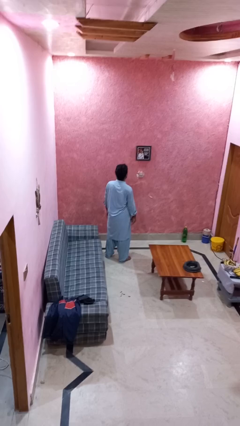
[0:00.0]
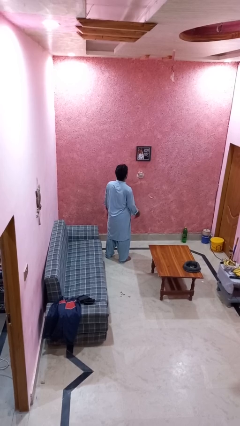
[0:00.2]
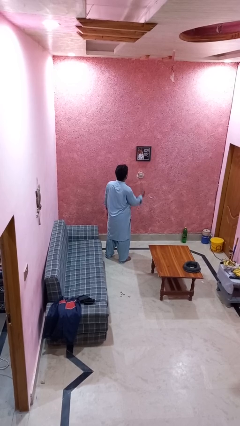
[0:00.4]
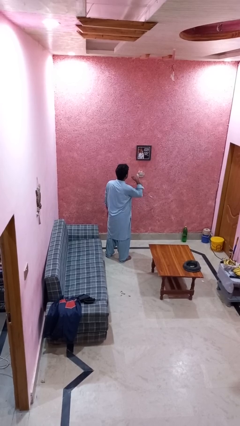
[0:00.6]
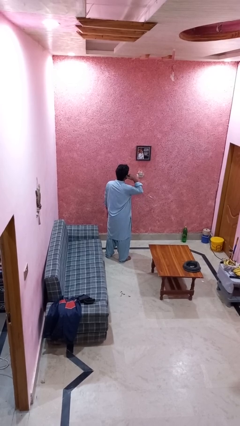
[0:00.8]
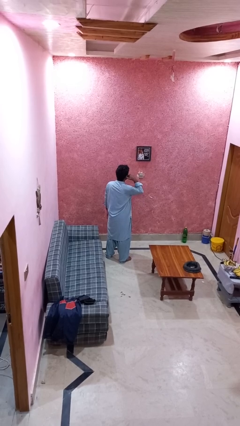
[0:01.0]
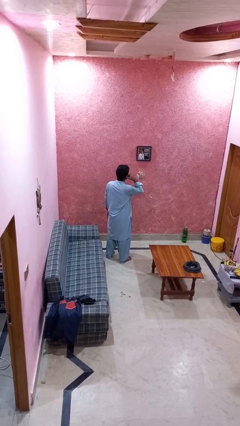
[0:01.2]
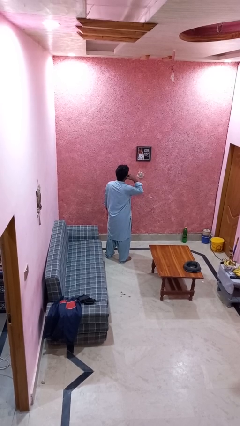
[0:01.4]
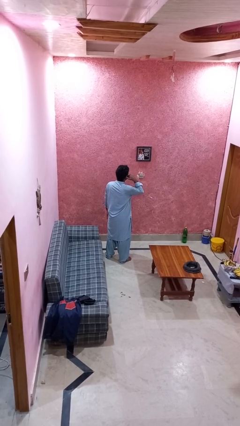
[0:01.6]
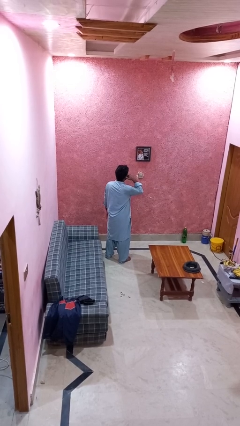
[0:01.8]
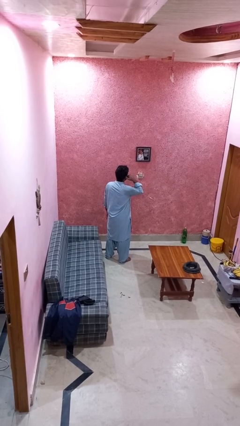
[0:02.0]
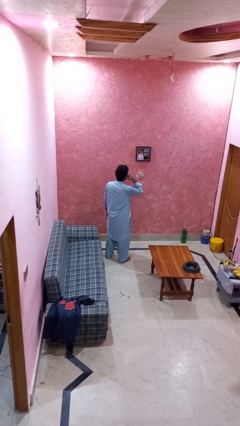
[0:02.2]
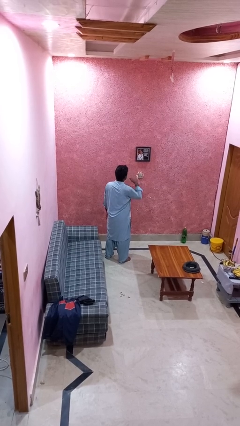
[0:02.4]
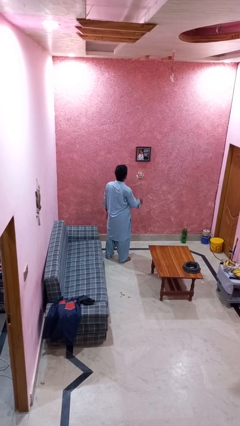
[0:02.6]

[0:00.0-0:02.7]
person gestures call me

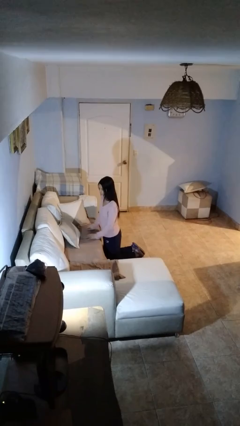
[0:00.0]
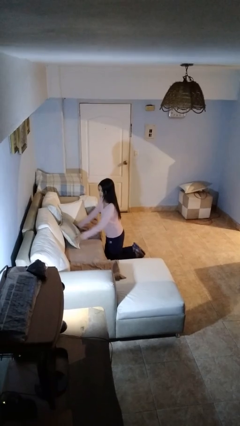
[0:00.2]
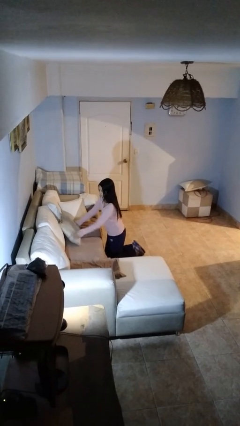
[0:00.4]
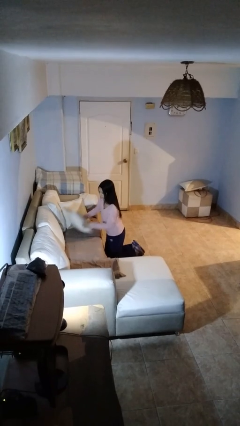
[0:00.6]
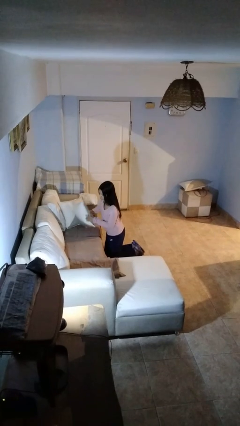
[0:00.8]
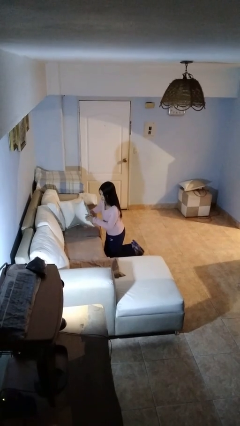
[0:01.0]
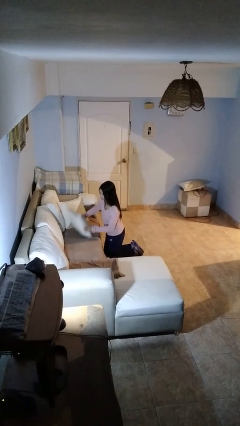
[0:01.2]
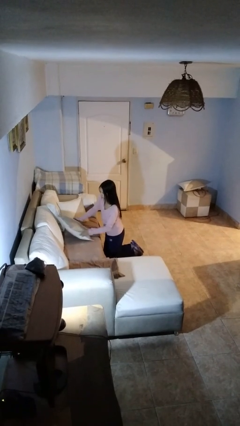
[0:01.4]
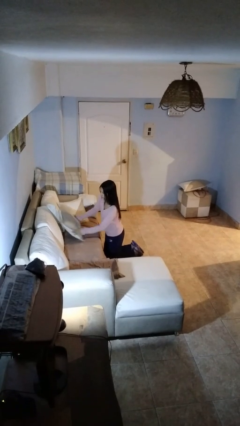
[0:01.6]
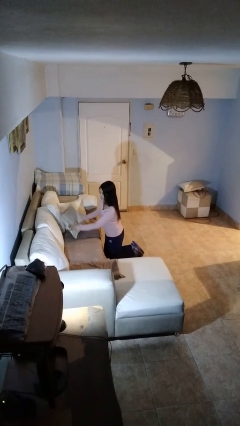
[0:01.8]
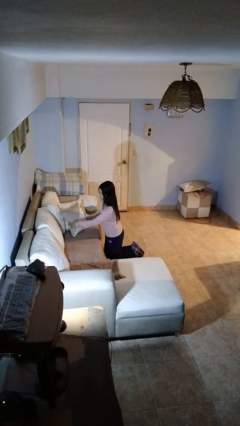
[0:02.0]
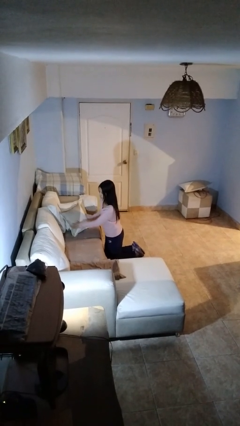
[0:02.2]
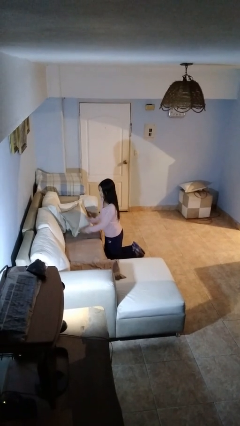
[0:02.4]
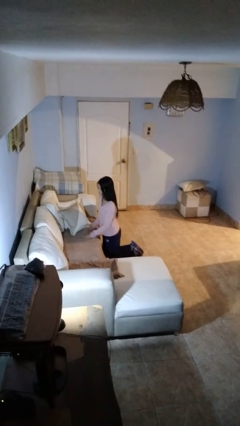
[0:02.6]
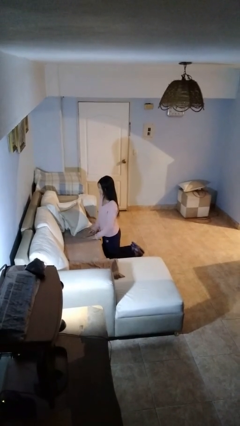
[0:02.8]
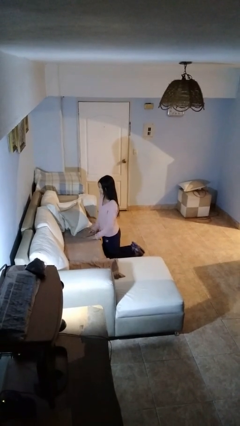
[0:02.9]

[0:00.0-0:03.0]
person searches in couch

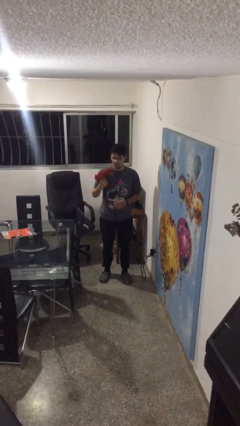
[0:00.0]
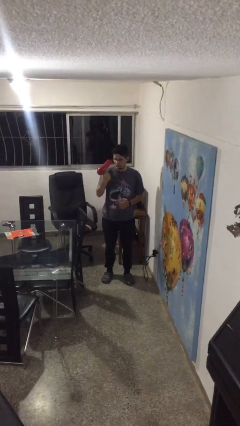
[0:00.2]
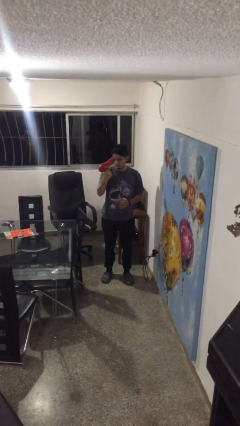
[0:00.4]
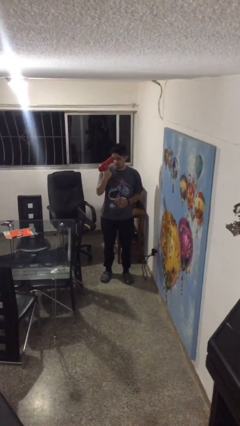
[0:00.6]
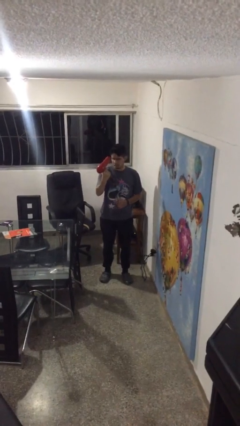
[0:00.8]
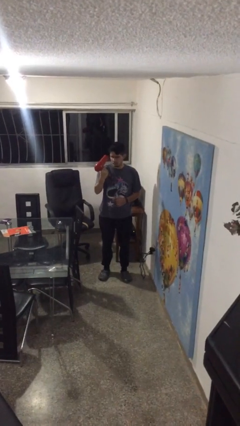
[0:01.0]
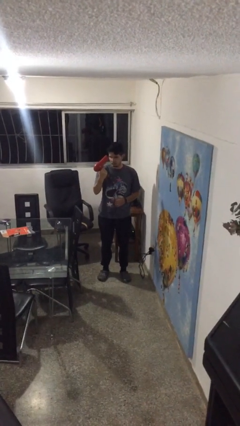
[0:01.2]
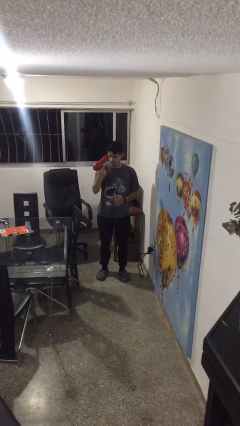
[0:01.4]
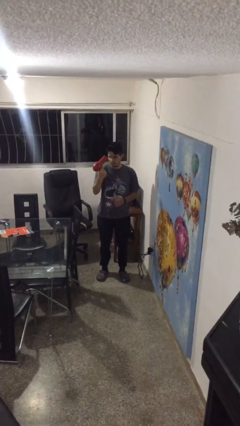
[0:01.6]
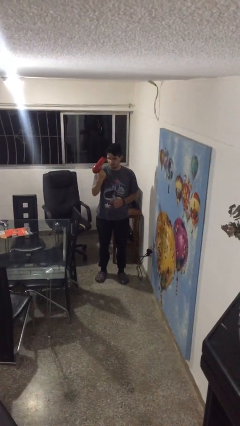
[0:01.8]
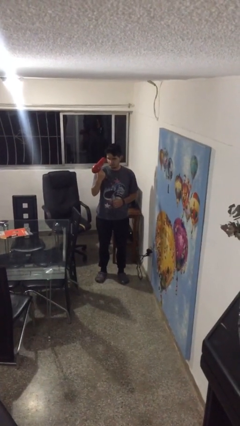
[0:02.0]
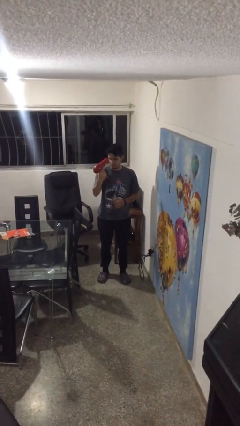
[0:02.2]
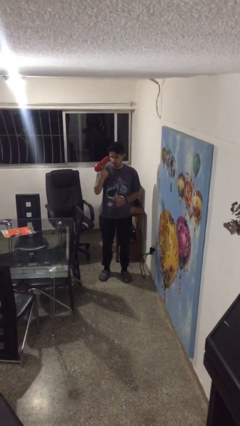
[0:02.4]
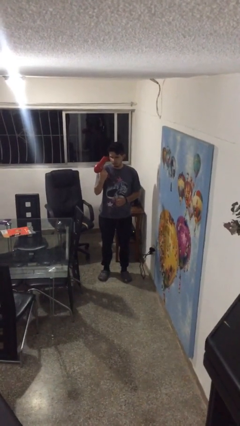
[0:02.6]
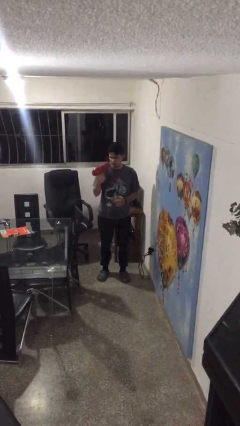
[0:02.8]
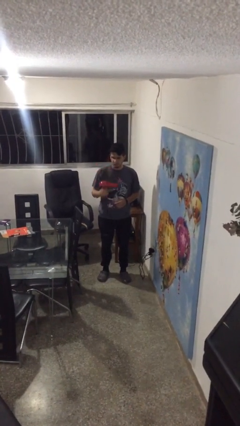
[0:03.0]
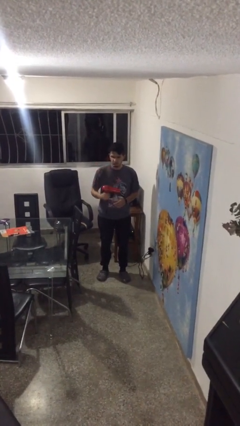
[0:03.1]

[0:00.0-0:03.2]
person dries hair with hairdryer

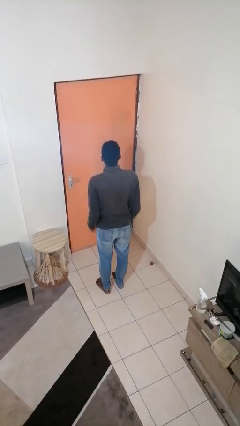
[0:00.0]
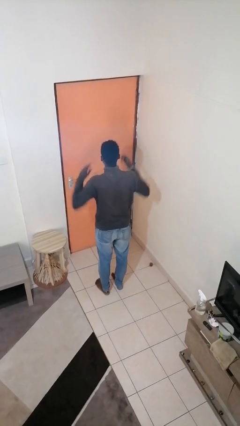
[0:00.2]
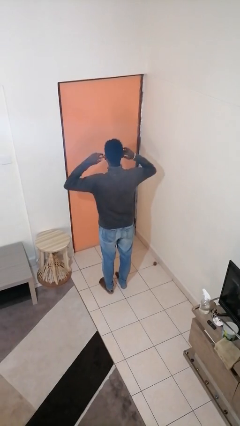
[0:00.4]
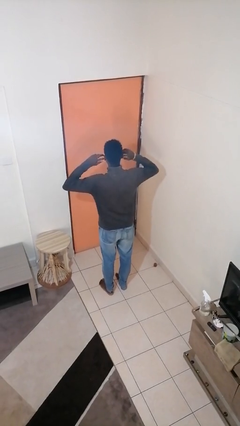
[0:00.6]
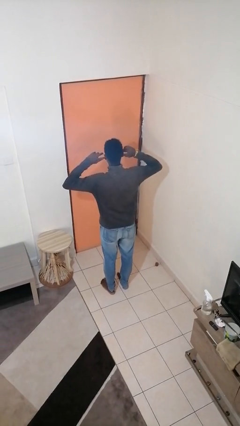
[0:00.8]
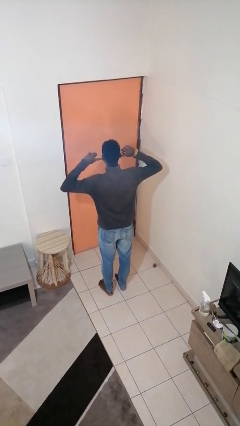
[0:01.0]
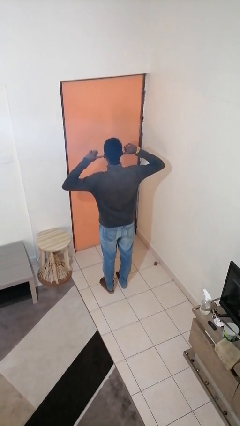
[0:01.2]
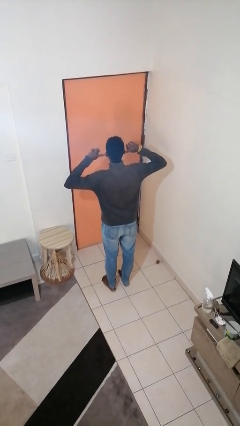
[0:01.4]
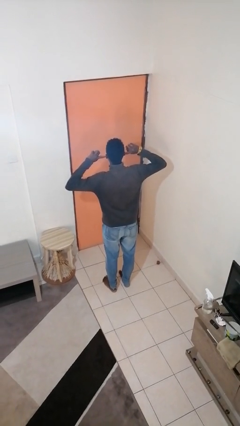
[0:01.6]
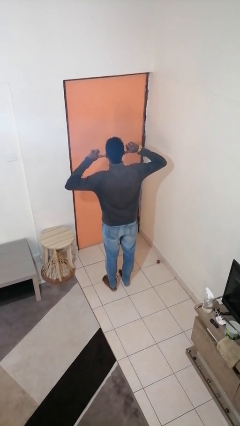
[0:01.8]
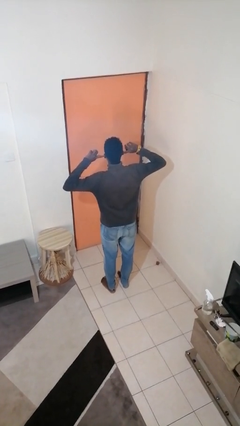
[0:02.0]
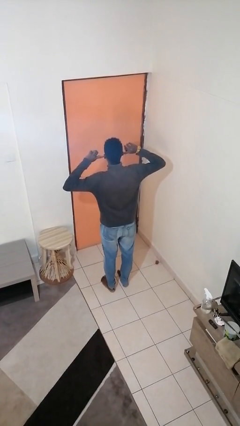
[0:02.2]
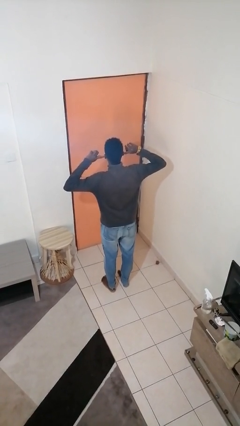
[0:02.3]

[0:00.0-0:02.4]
person puts fingers in ear

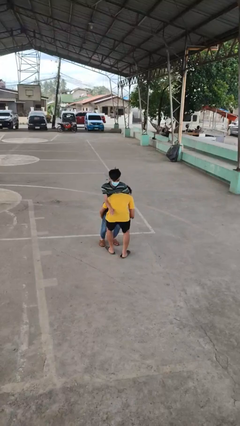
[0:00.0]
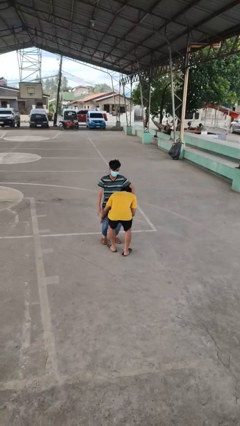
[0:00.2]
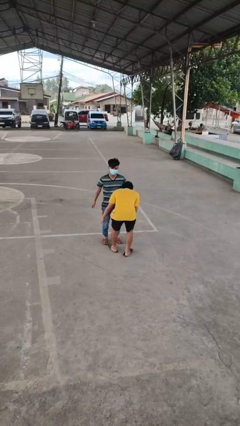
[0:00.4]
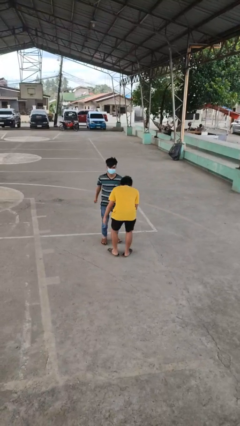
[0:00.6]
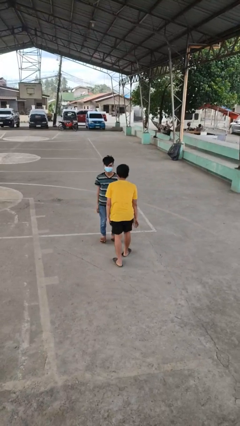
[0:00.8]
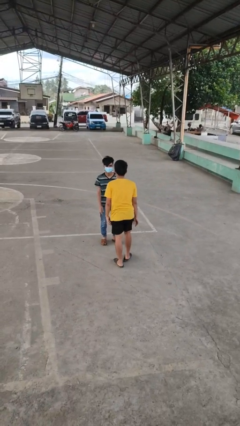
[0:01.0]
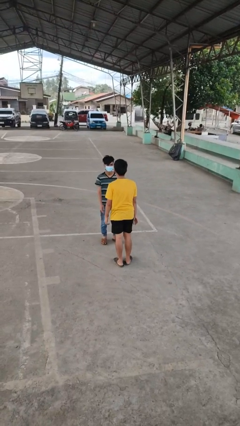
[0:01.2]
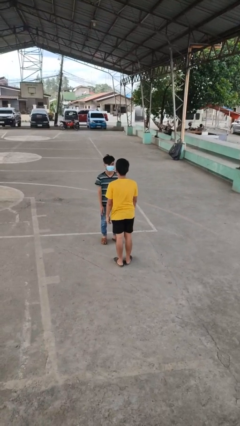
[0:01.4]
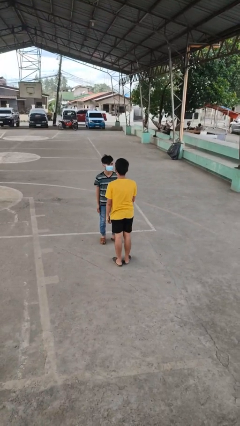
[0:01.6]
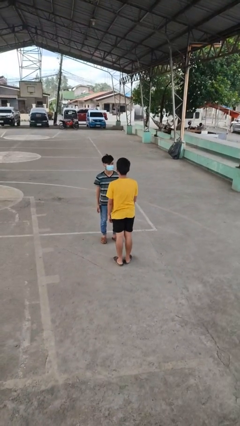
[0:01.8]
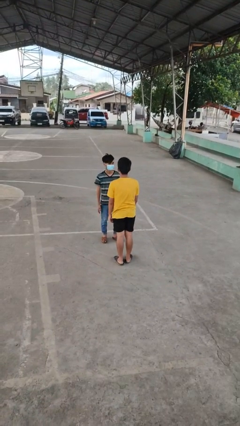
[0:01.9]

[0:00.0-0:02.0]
person puts down person

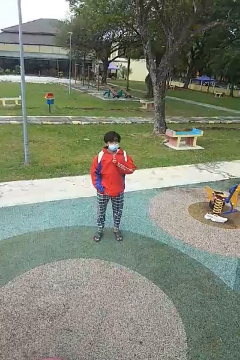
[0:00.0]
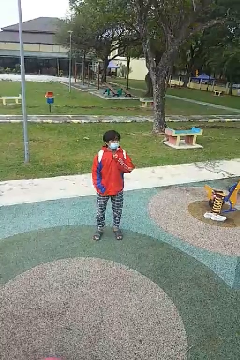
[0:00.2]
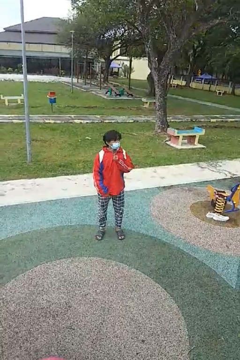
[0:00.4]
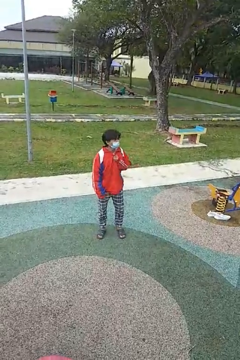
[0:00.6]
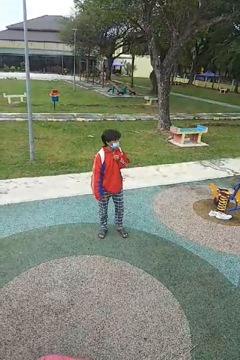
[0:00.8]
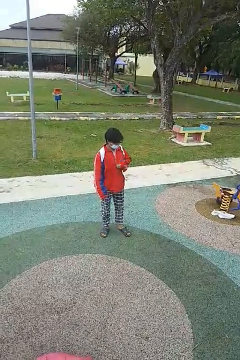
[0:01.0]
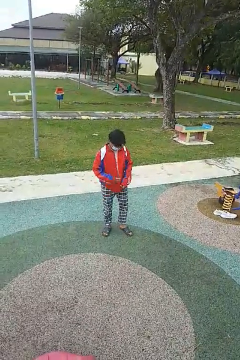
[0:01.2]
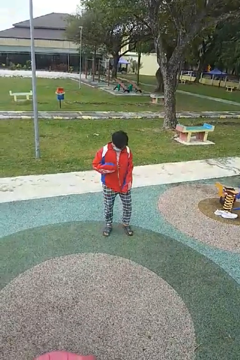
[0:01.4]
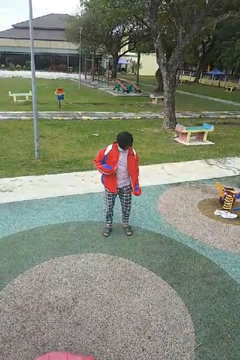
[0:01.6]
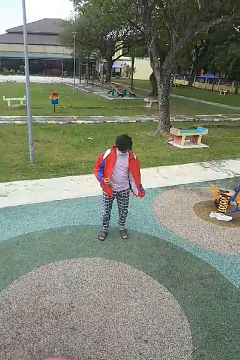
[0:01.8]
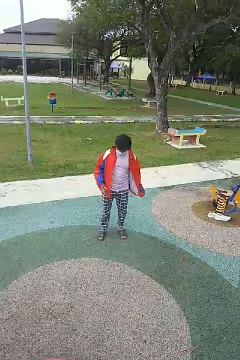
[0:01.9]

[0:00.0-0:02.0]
person unzips jacket

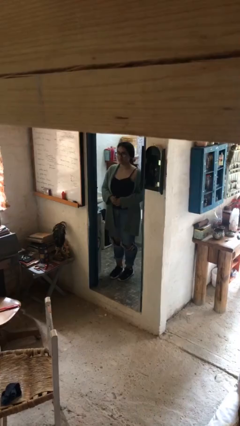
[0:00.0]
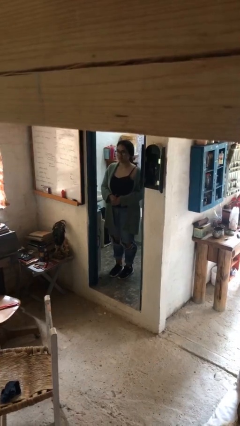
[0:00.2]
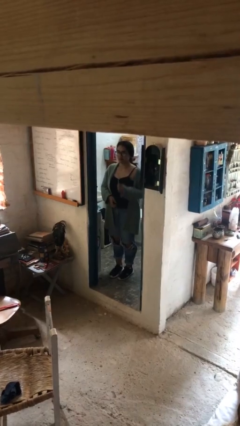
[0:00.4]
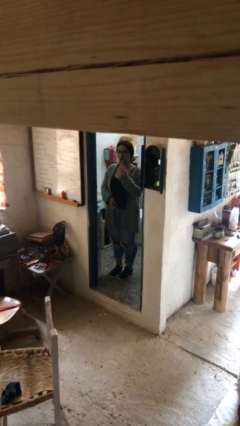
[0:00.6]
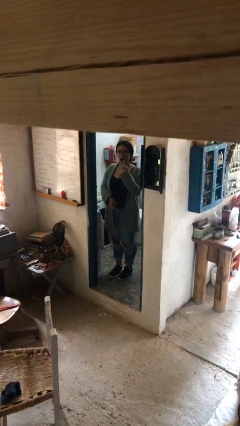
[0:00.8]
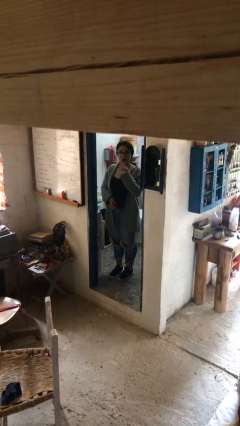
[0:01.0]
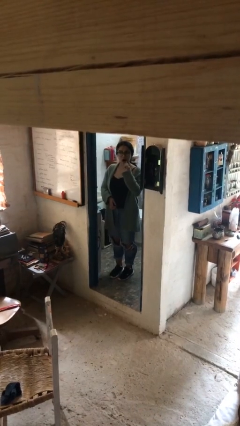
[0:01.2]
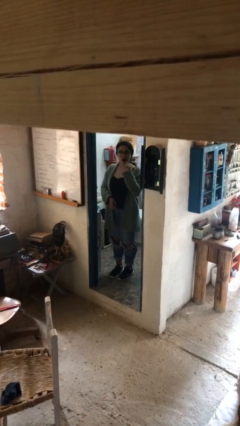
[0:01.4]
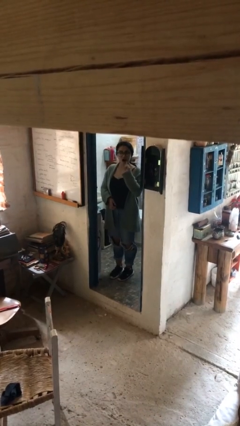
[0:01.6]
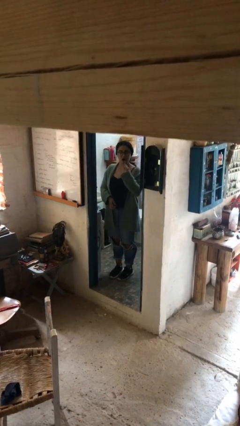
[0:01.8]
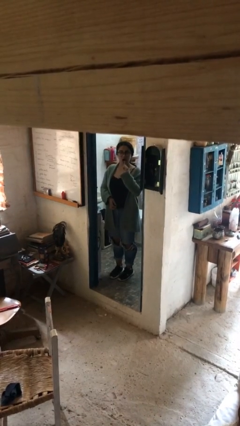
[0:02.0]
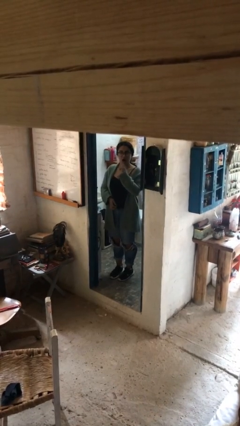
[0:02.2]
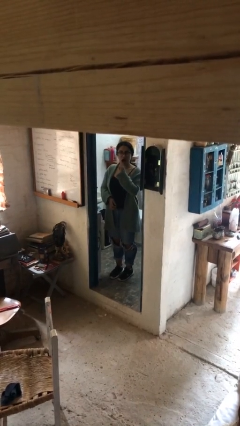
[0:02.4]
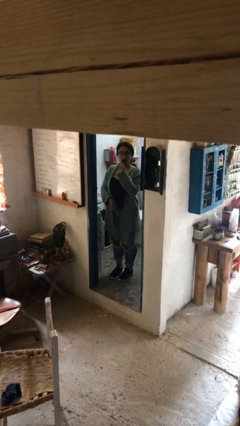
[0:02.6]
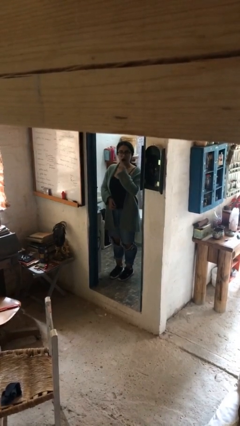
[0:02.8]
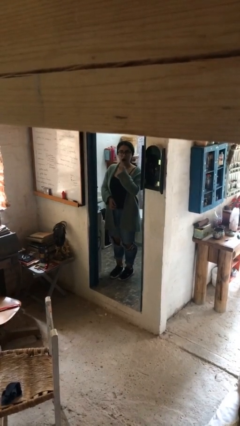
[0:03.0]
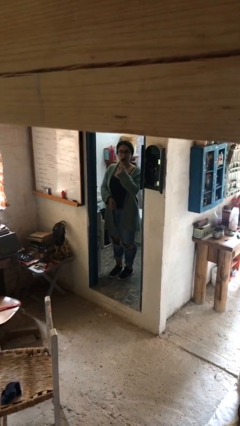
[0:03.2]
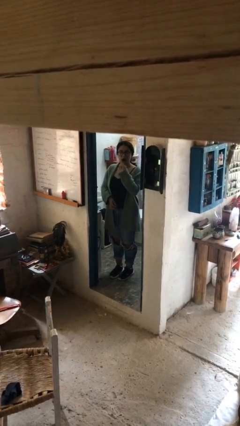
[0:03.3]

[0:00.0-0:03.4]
person brushes teeth